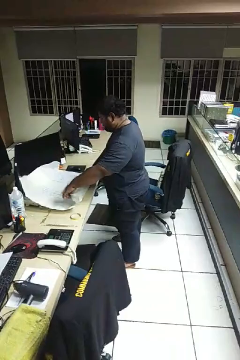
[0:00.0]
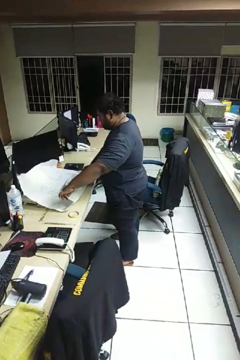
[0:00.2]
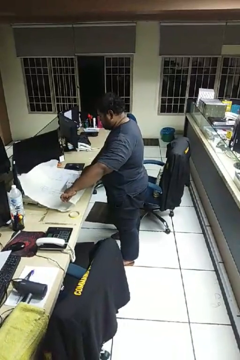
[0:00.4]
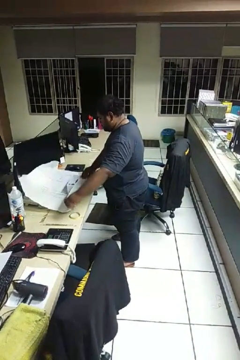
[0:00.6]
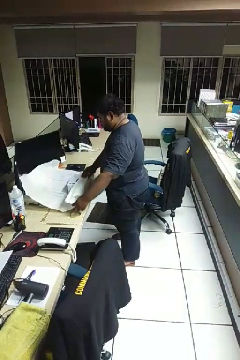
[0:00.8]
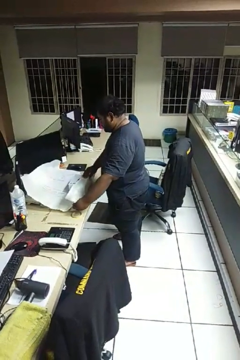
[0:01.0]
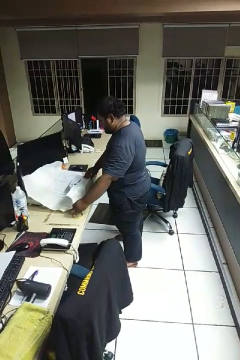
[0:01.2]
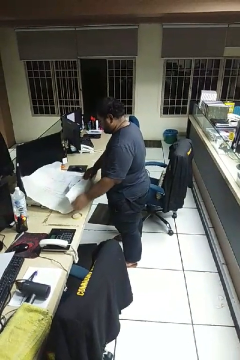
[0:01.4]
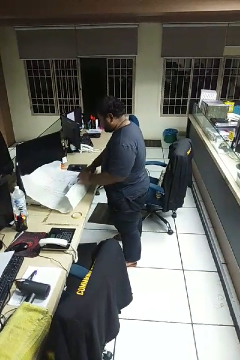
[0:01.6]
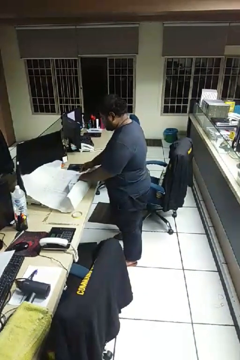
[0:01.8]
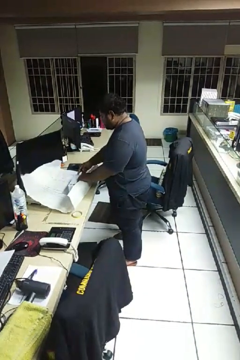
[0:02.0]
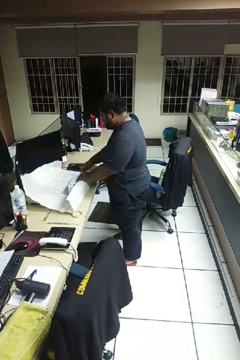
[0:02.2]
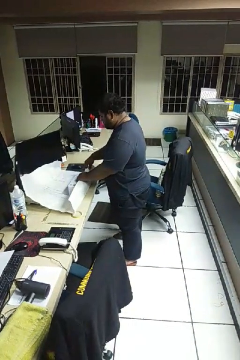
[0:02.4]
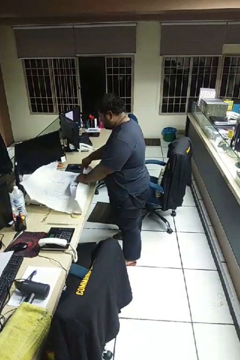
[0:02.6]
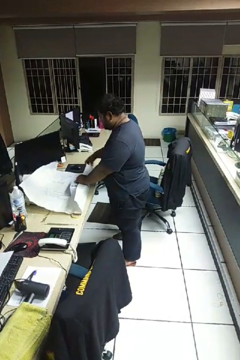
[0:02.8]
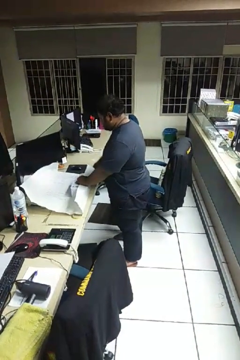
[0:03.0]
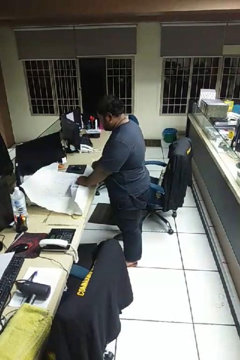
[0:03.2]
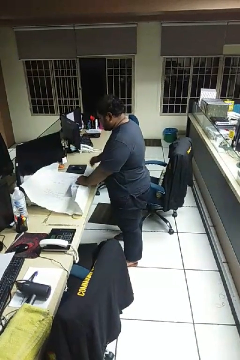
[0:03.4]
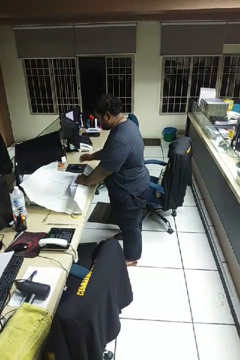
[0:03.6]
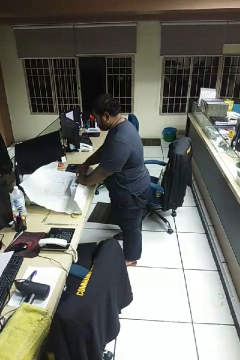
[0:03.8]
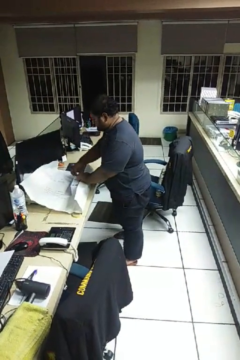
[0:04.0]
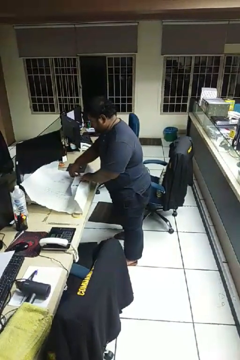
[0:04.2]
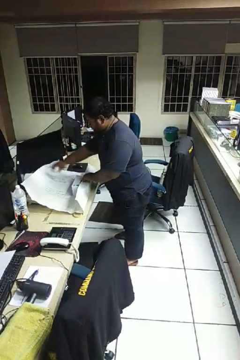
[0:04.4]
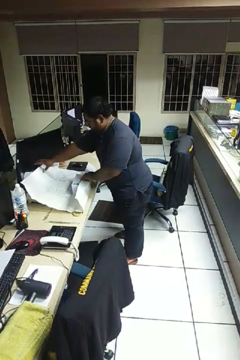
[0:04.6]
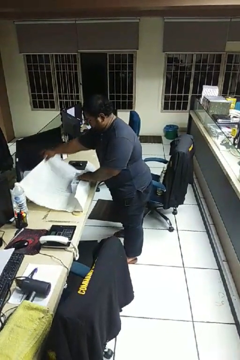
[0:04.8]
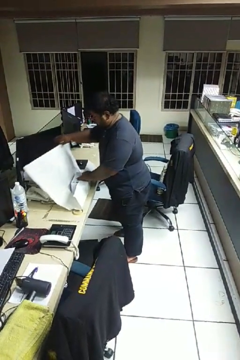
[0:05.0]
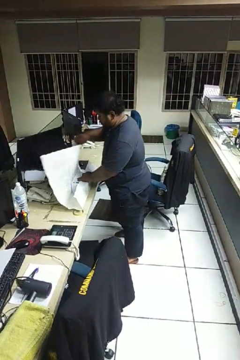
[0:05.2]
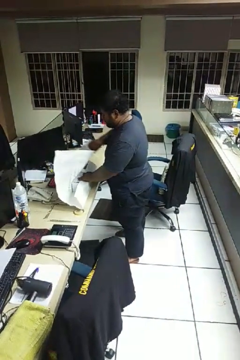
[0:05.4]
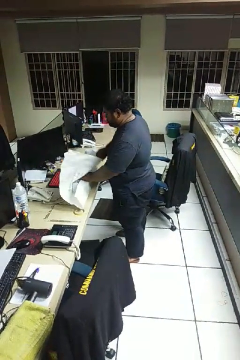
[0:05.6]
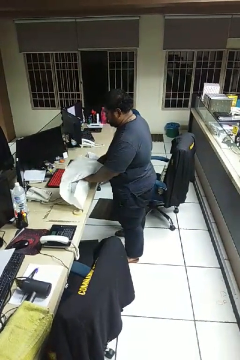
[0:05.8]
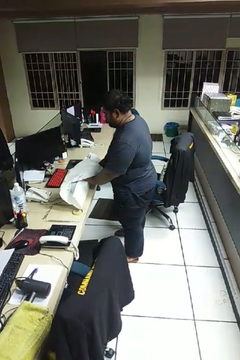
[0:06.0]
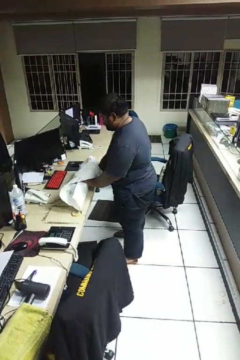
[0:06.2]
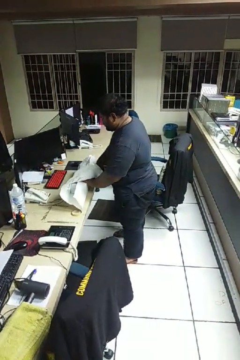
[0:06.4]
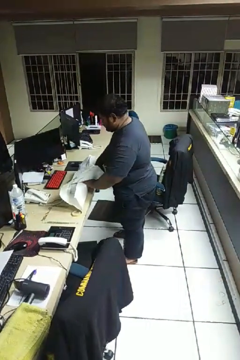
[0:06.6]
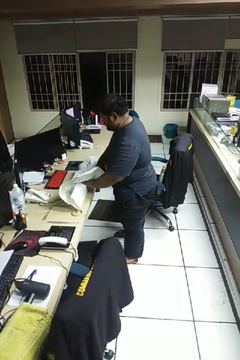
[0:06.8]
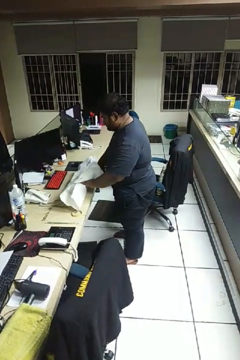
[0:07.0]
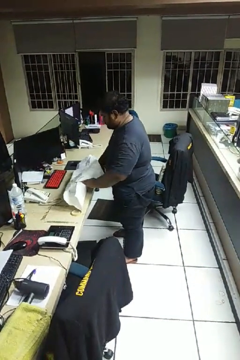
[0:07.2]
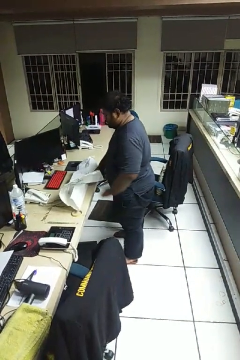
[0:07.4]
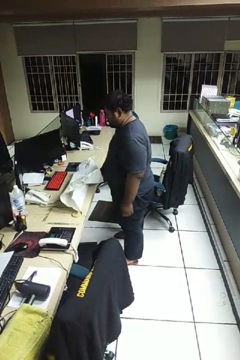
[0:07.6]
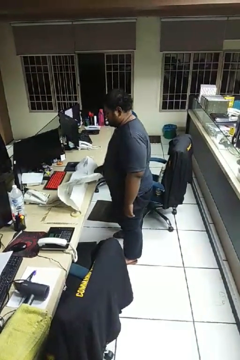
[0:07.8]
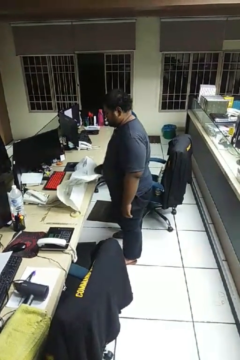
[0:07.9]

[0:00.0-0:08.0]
person wraps box

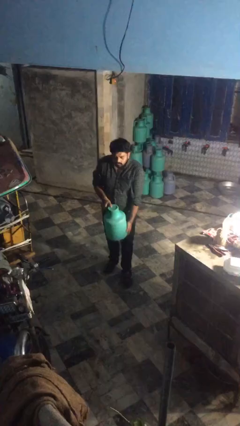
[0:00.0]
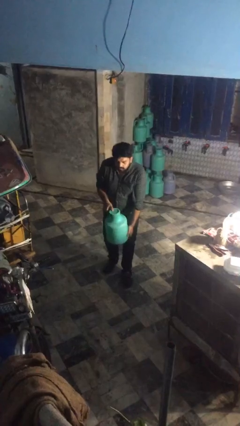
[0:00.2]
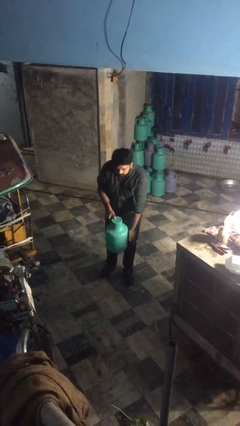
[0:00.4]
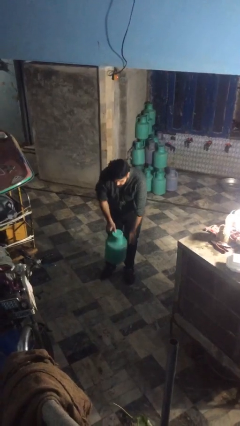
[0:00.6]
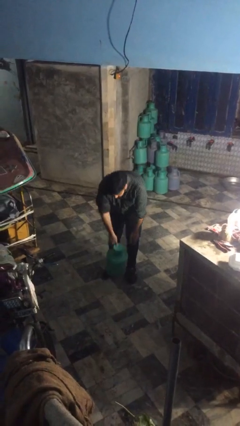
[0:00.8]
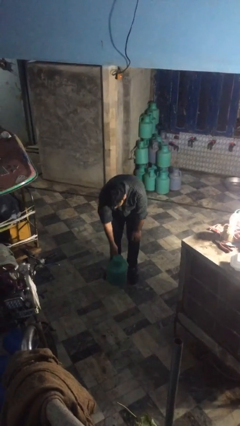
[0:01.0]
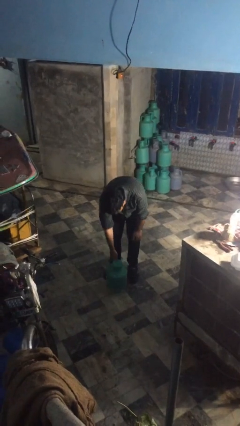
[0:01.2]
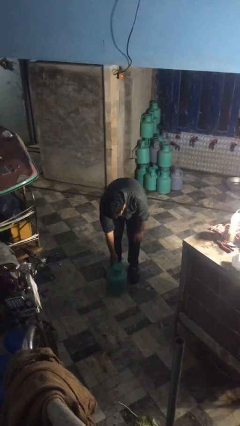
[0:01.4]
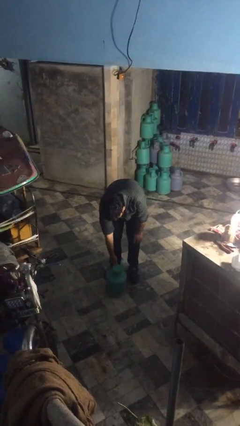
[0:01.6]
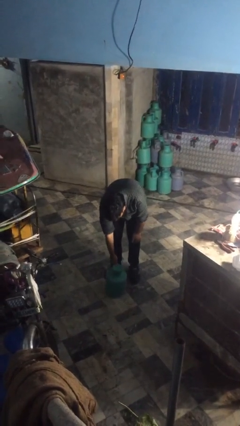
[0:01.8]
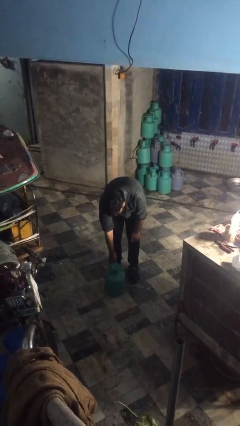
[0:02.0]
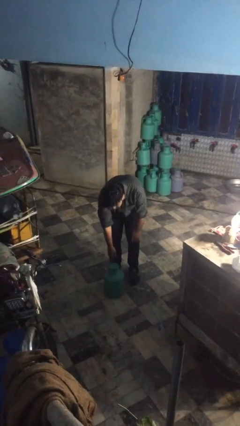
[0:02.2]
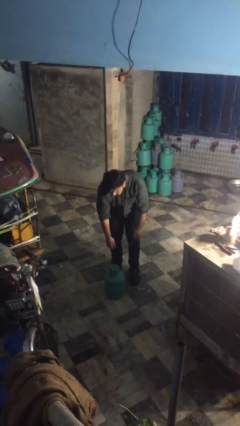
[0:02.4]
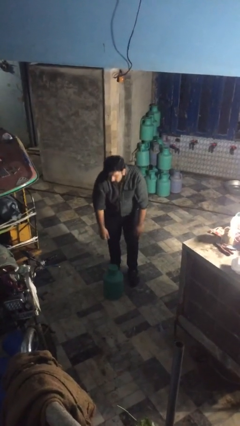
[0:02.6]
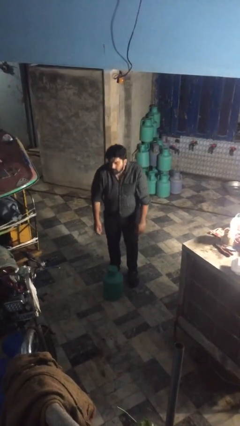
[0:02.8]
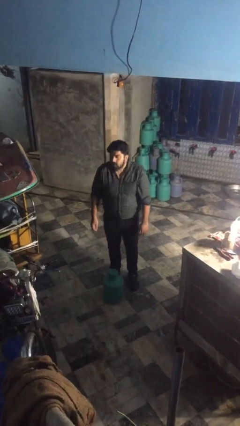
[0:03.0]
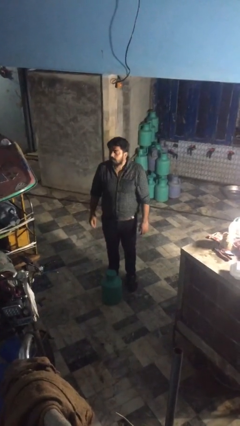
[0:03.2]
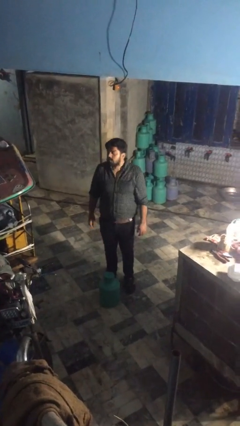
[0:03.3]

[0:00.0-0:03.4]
person puts down object on floor

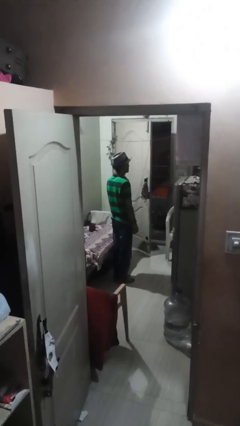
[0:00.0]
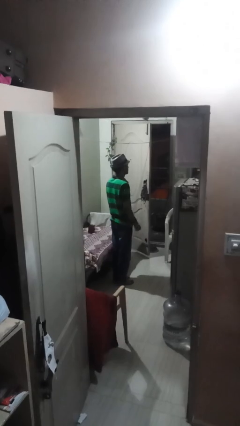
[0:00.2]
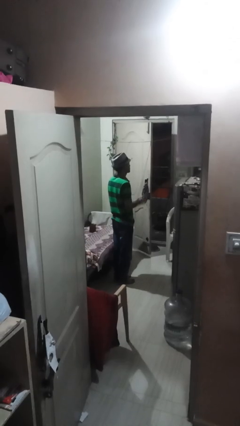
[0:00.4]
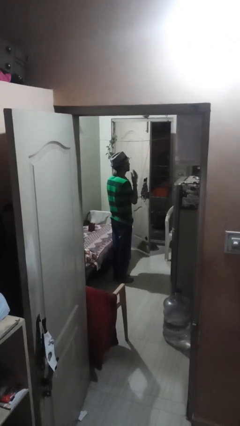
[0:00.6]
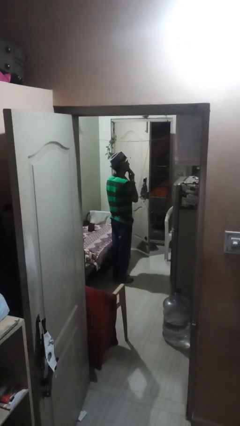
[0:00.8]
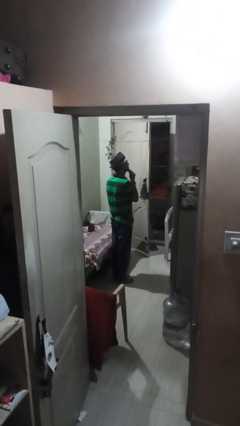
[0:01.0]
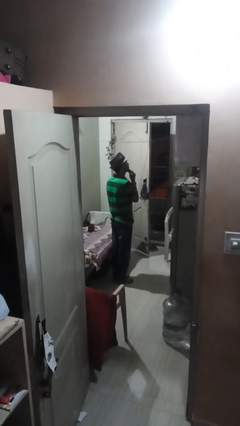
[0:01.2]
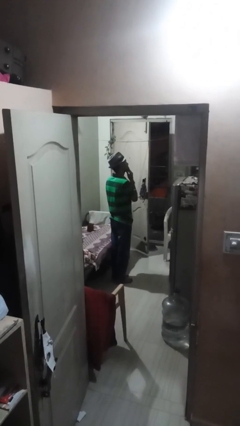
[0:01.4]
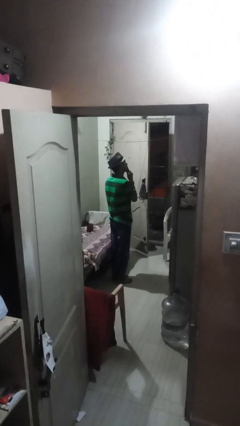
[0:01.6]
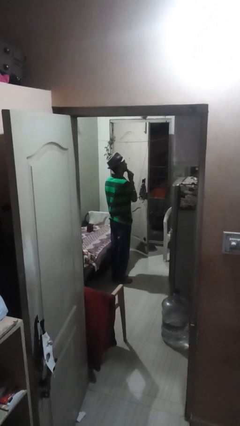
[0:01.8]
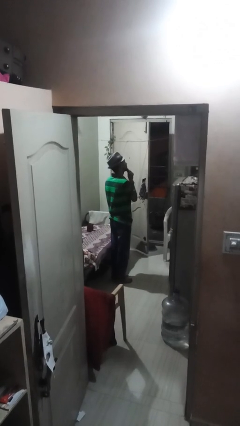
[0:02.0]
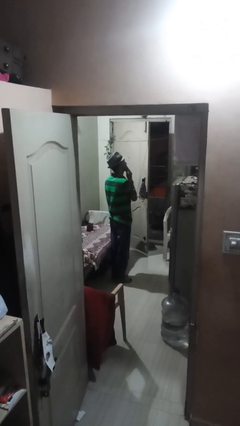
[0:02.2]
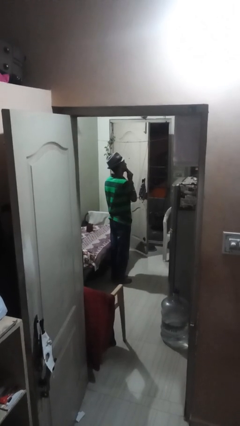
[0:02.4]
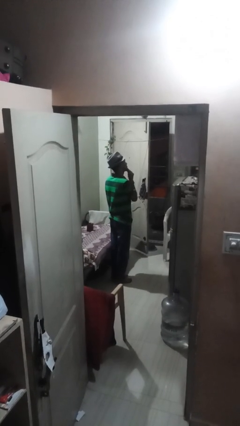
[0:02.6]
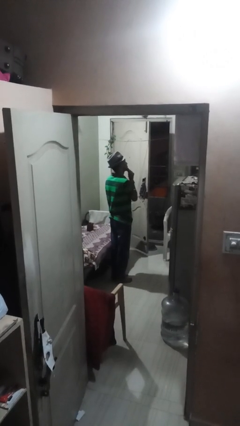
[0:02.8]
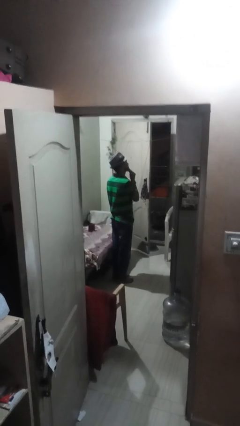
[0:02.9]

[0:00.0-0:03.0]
person strokes chin

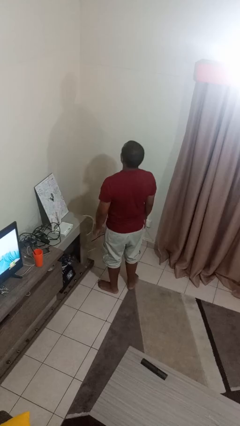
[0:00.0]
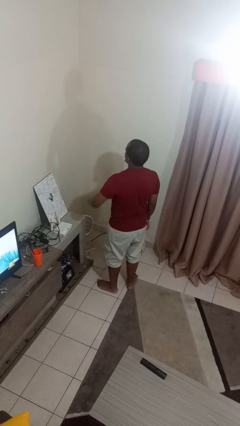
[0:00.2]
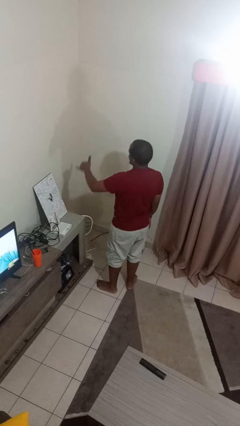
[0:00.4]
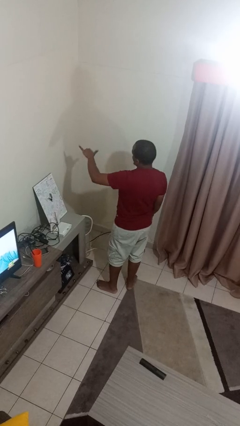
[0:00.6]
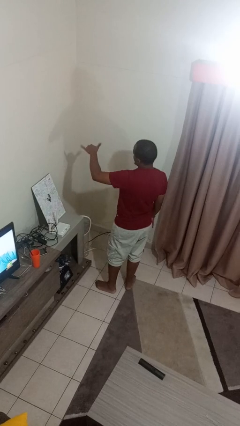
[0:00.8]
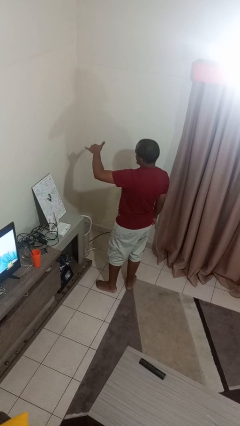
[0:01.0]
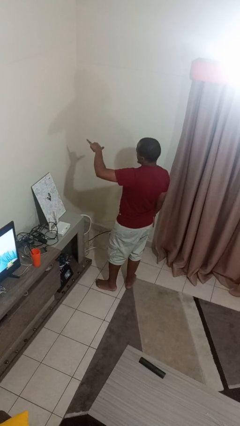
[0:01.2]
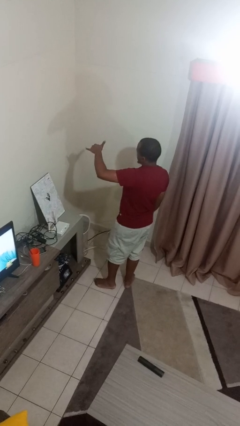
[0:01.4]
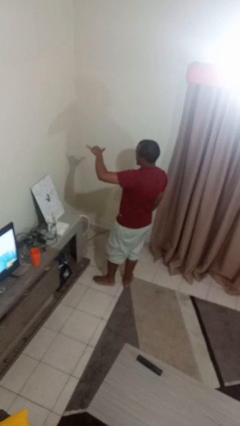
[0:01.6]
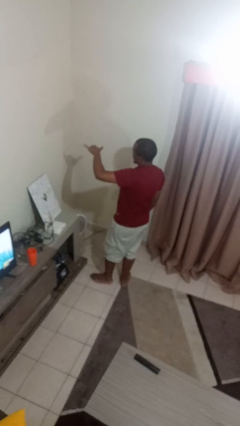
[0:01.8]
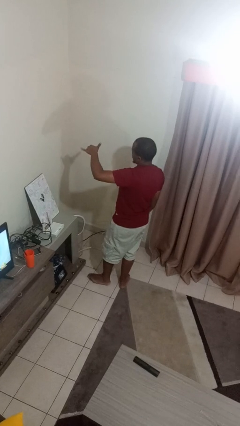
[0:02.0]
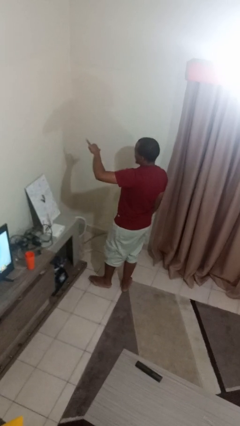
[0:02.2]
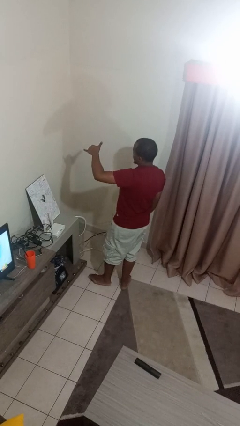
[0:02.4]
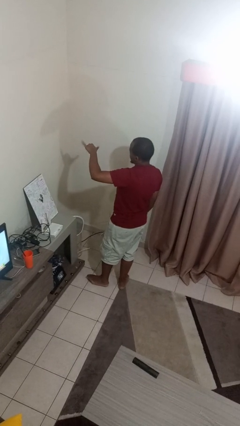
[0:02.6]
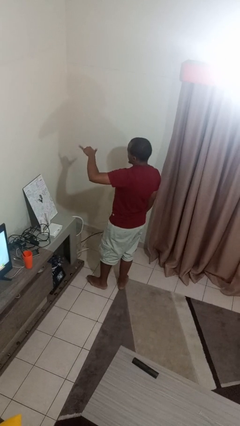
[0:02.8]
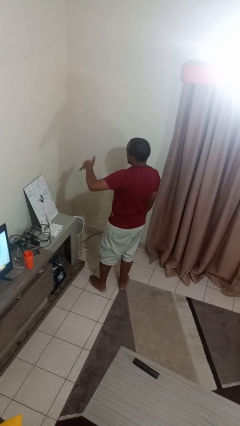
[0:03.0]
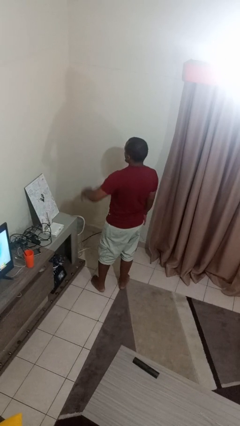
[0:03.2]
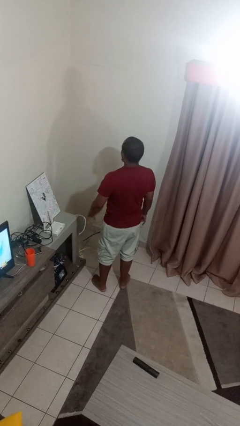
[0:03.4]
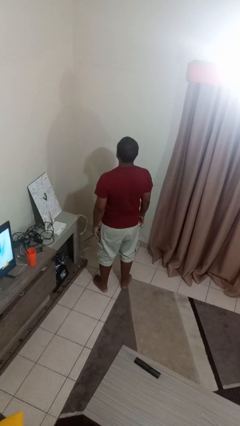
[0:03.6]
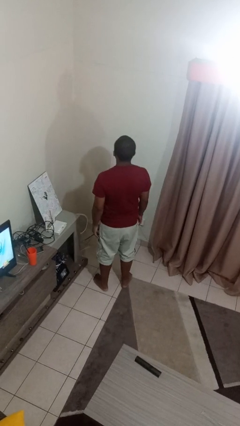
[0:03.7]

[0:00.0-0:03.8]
person gestures hang loose

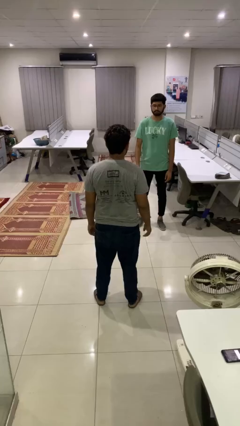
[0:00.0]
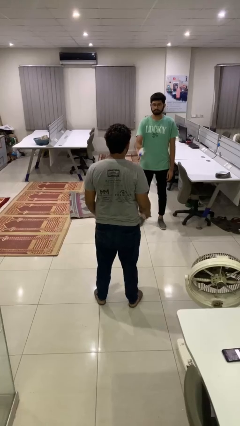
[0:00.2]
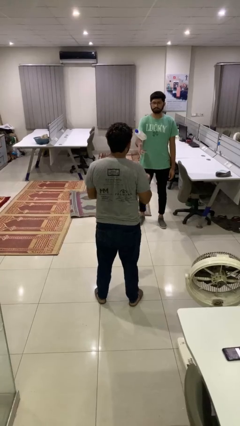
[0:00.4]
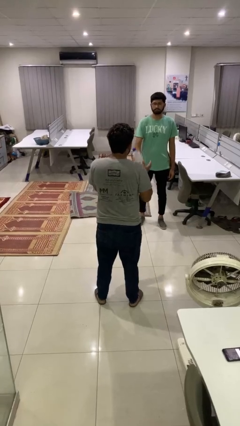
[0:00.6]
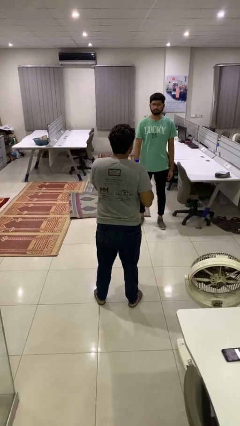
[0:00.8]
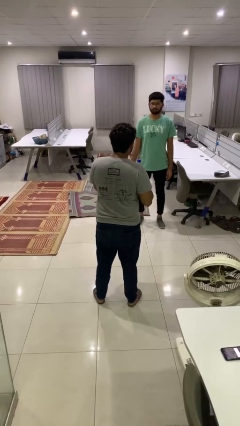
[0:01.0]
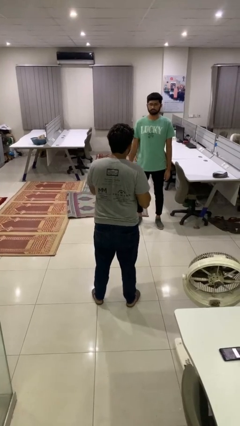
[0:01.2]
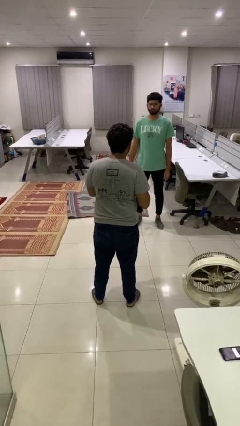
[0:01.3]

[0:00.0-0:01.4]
person catches object from person
